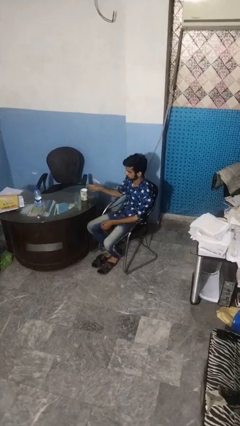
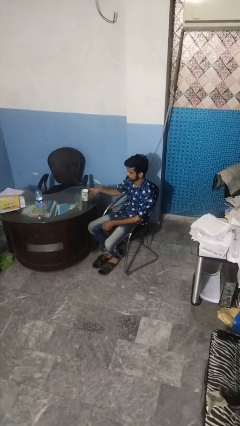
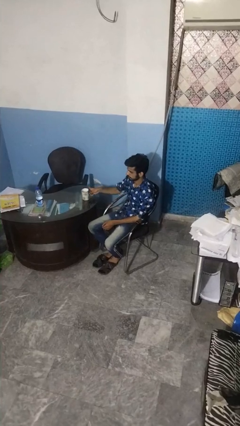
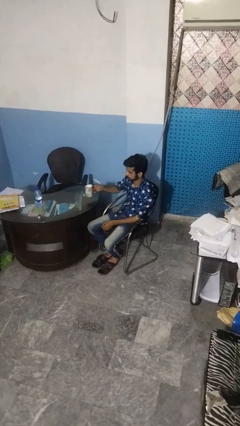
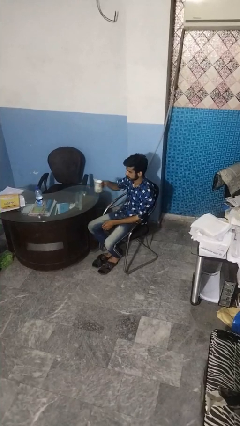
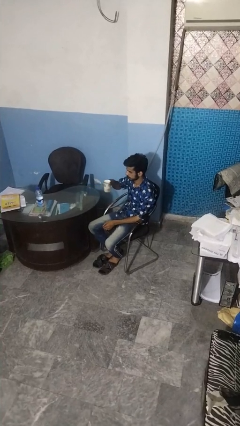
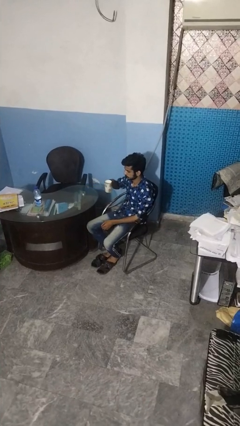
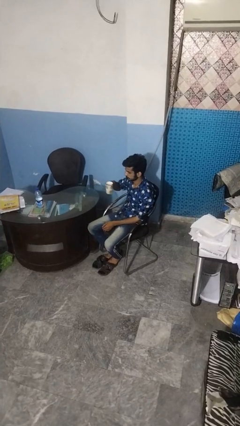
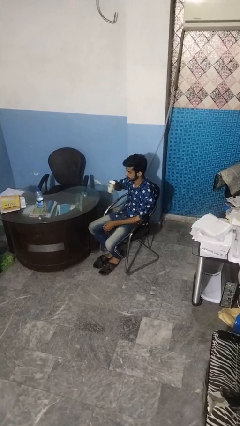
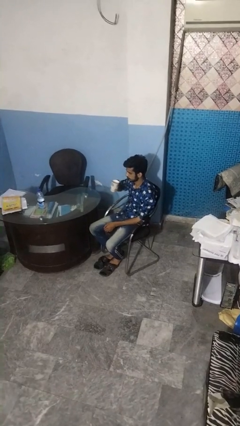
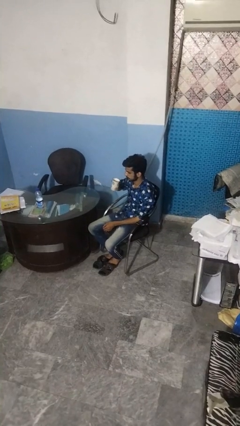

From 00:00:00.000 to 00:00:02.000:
person picks up object from table

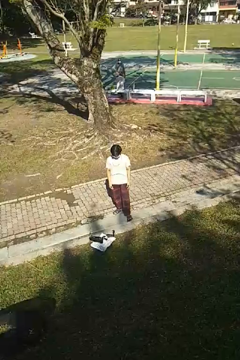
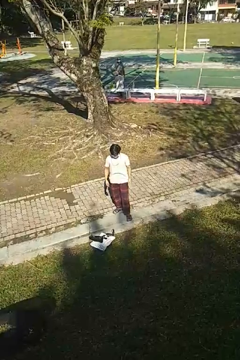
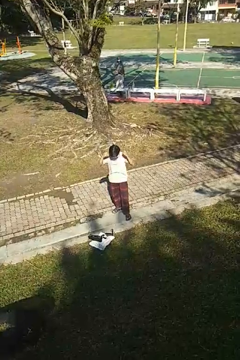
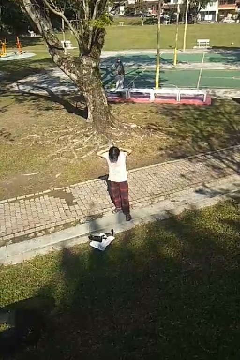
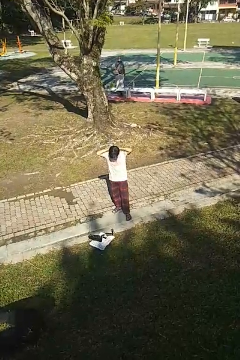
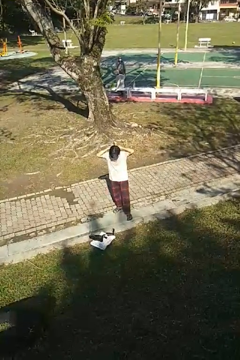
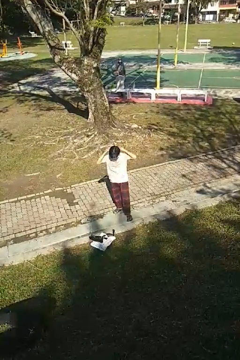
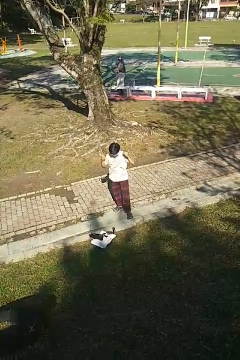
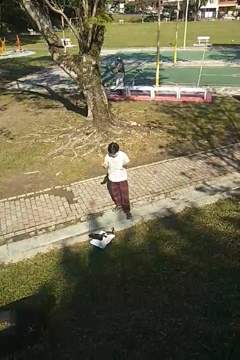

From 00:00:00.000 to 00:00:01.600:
person takes off necklace

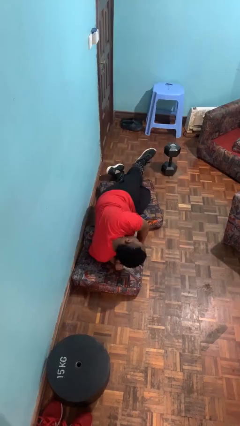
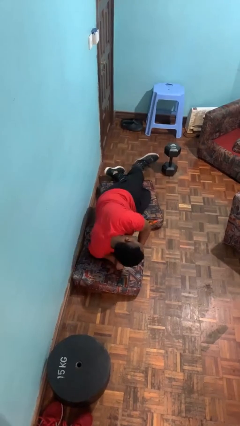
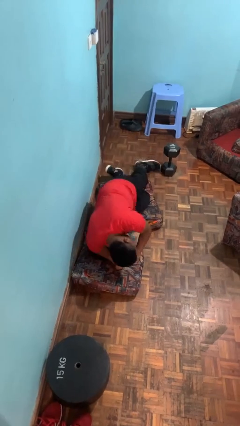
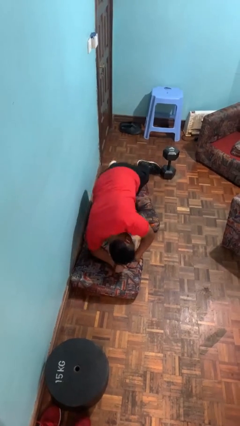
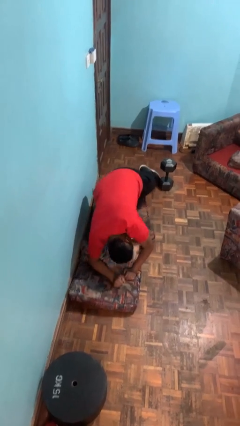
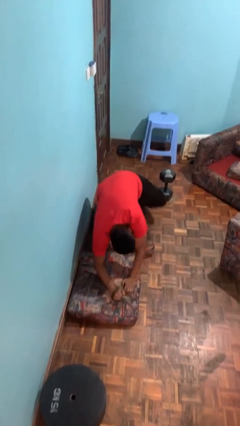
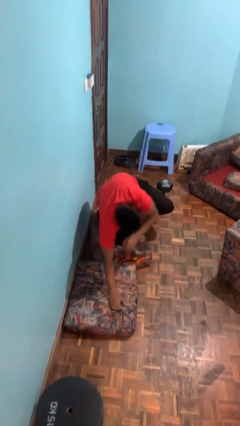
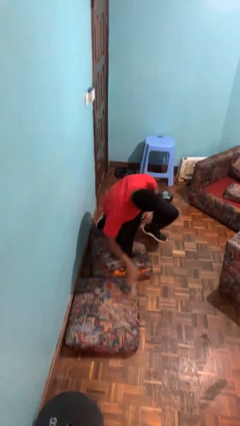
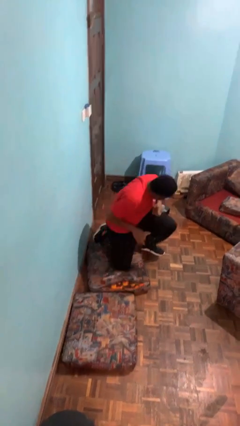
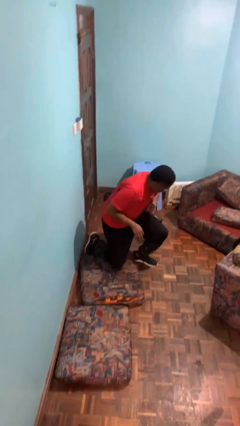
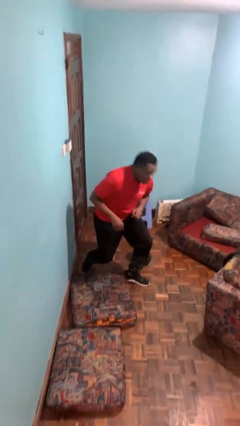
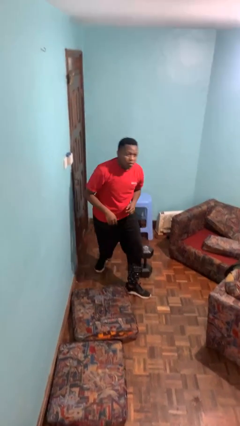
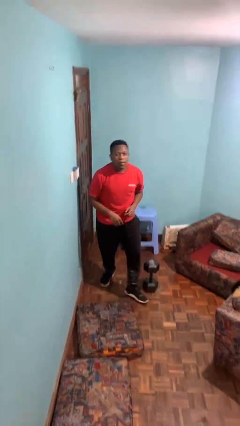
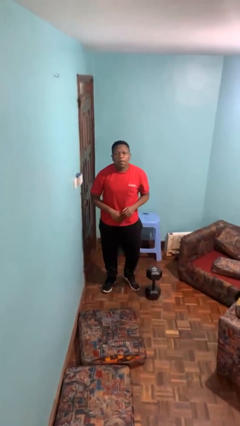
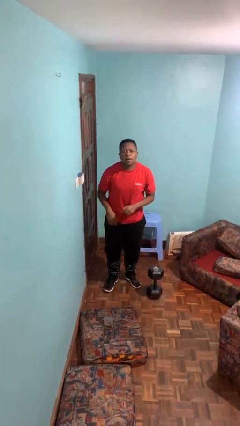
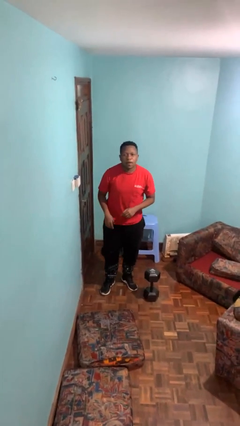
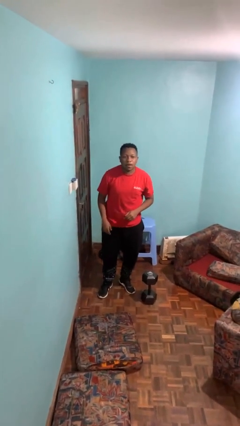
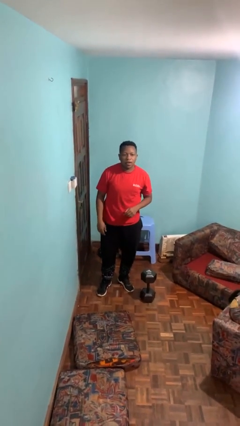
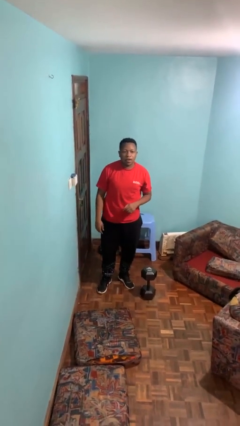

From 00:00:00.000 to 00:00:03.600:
person stands up from floor

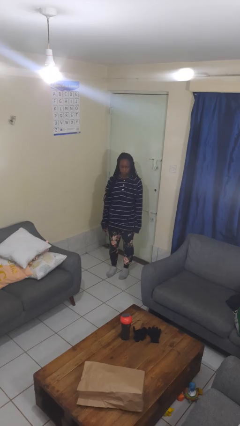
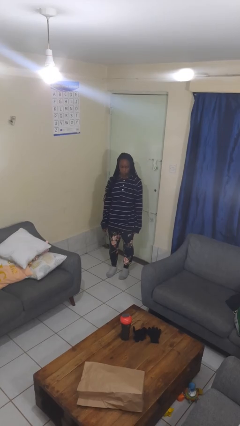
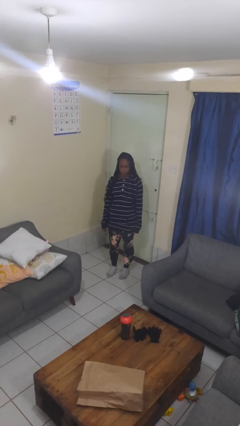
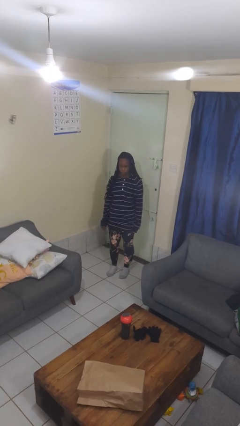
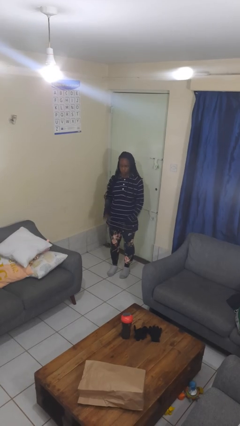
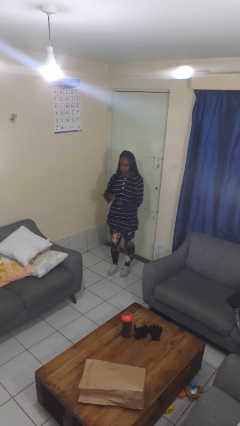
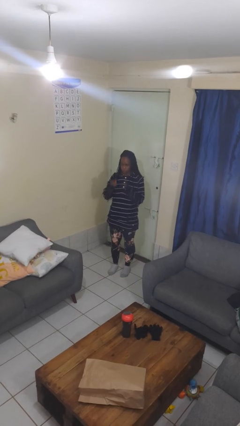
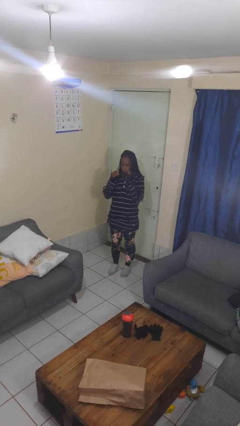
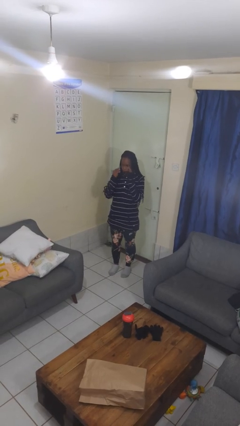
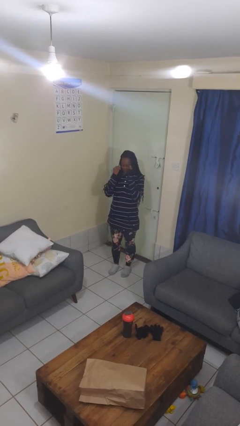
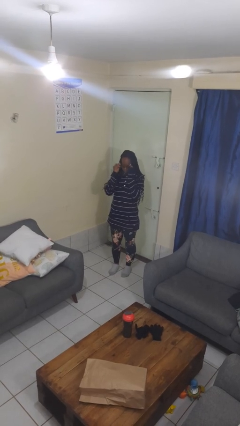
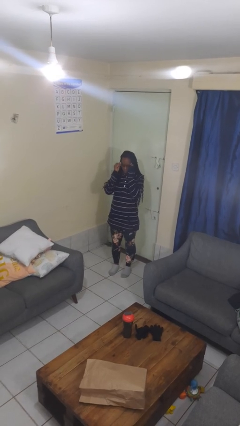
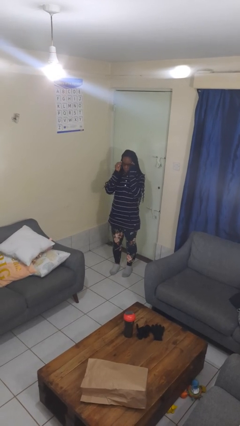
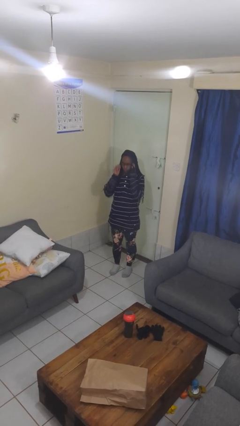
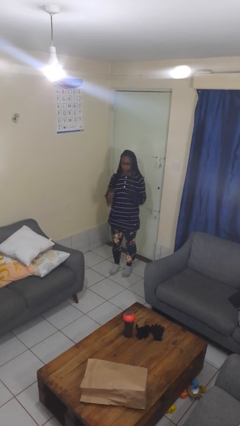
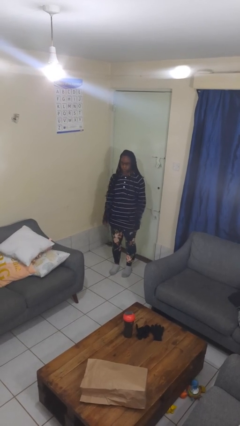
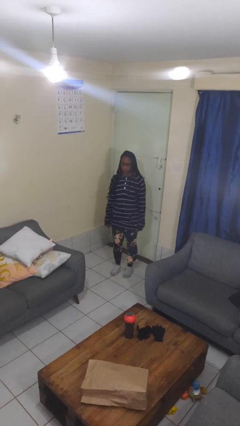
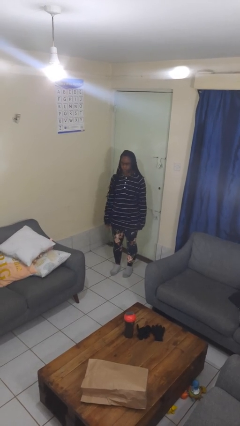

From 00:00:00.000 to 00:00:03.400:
person puts on glasses

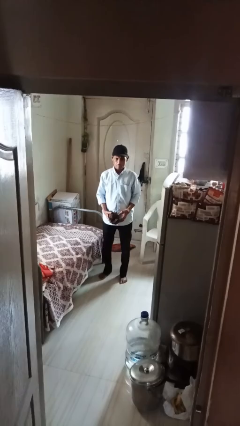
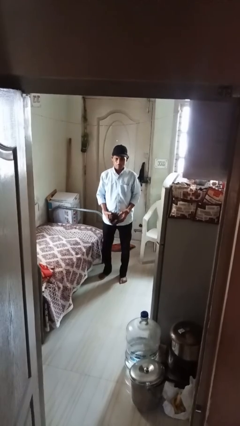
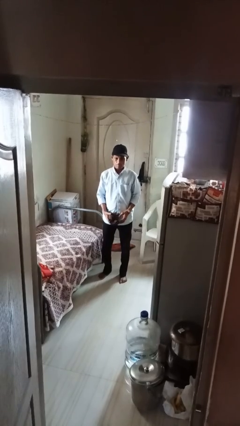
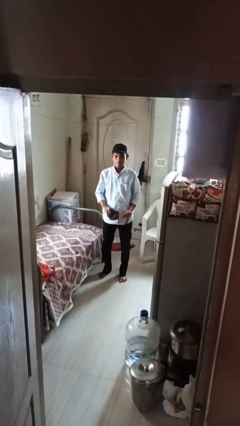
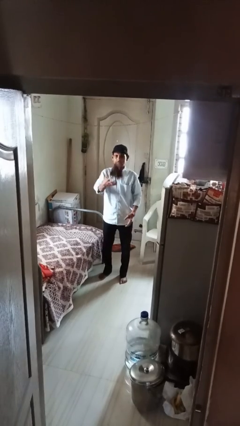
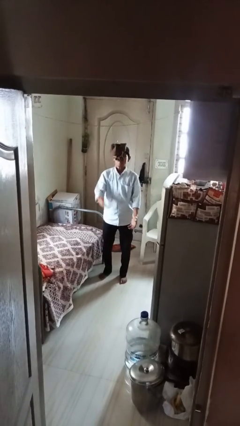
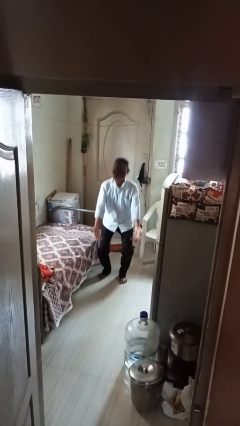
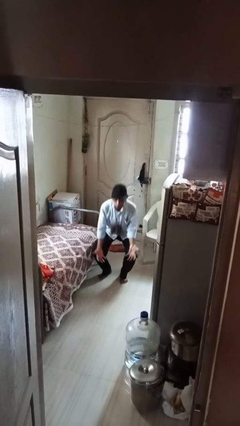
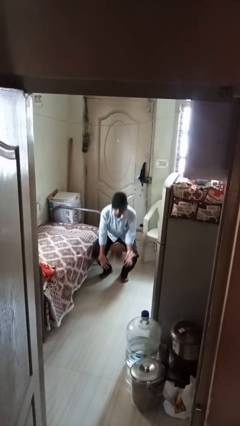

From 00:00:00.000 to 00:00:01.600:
person drops object

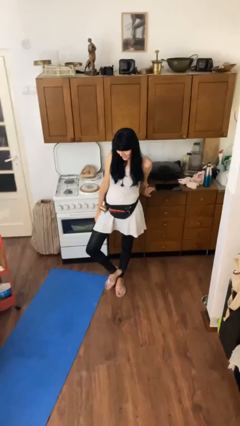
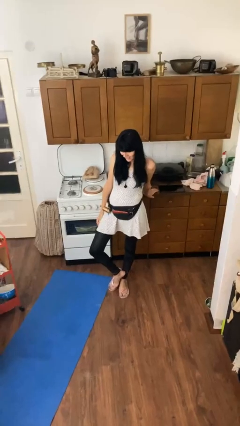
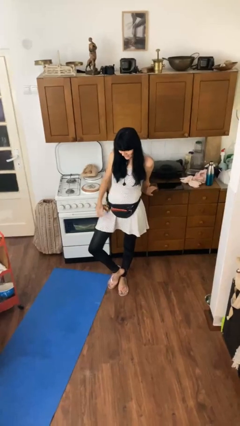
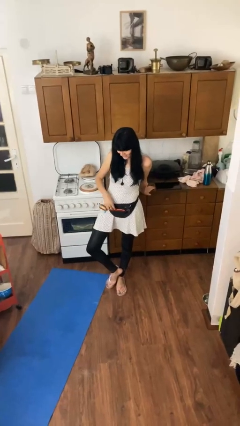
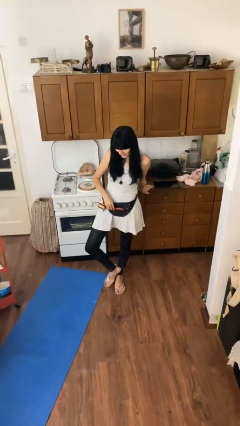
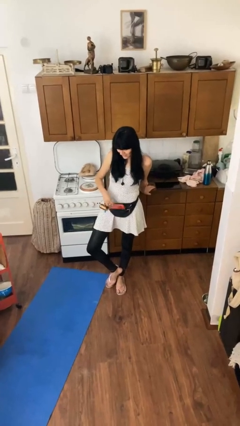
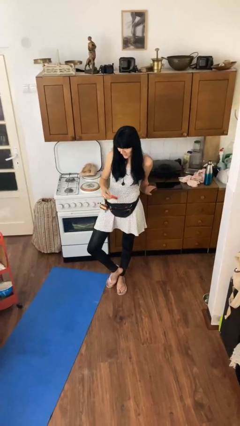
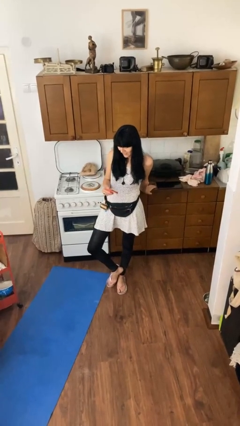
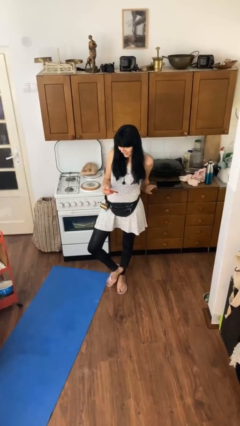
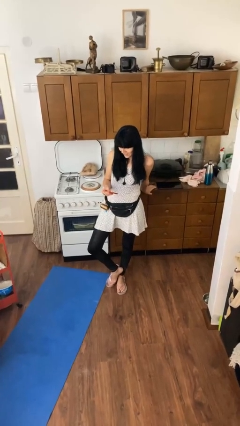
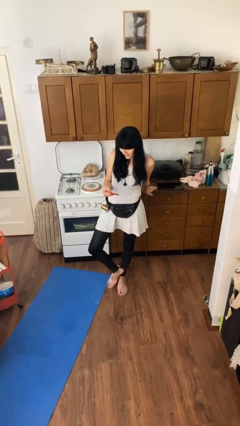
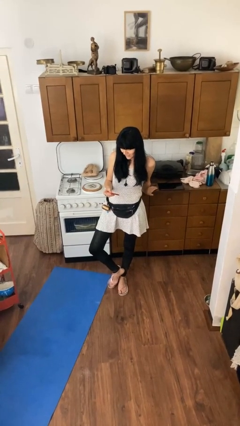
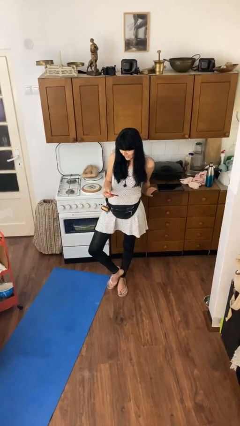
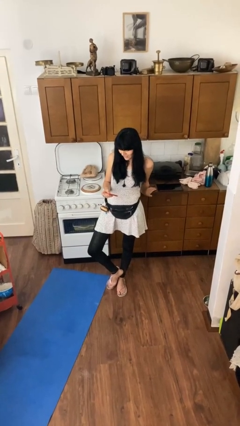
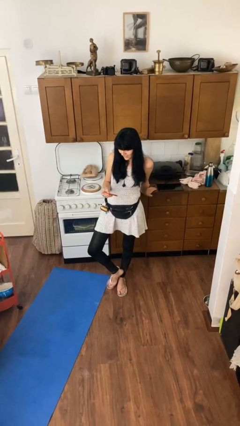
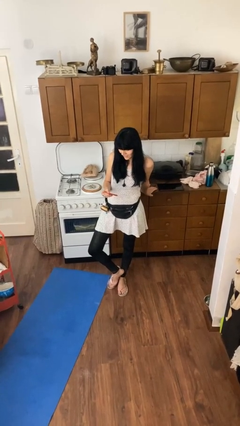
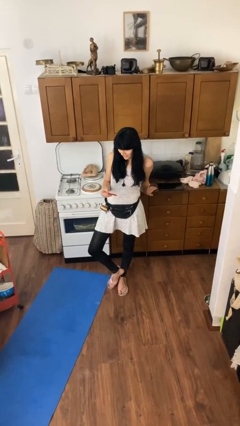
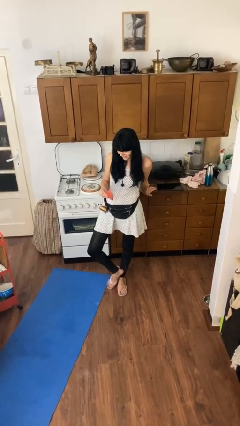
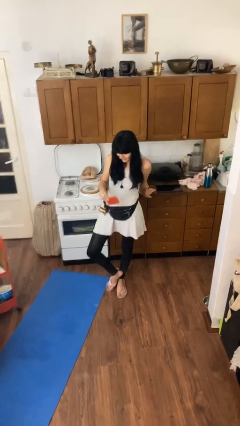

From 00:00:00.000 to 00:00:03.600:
person takes phone from pocket

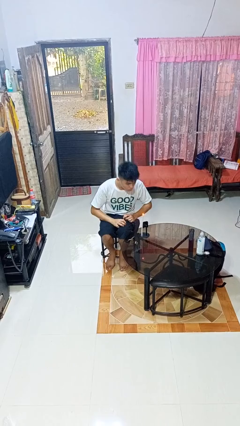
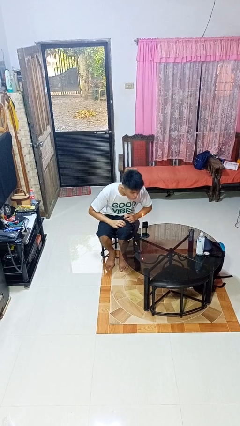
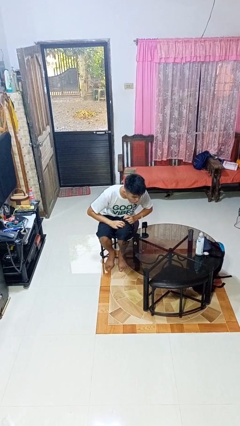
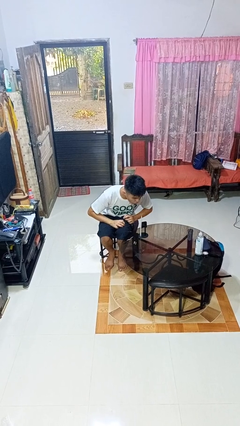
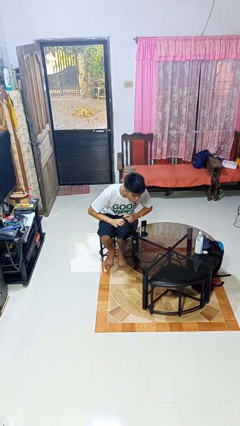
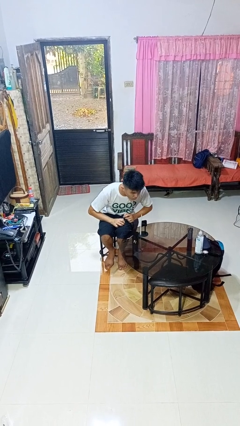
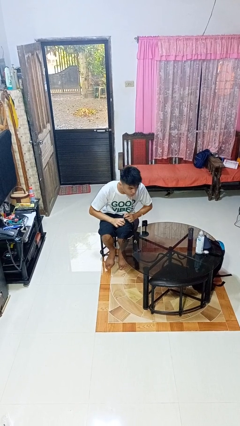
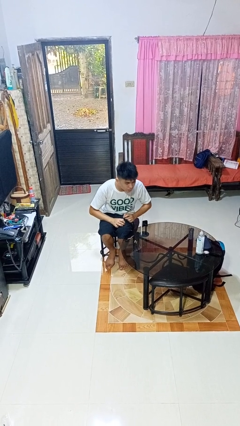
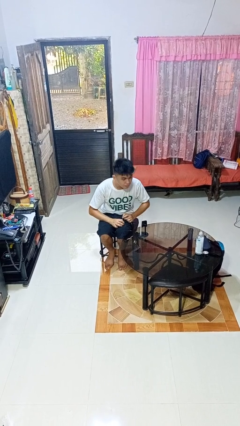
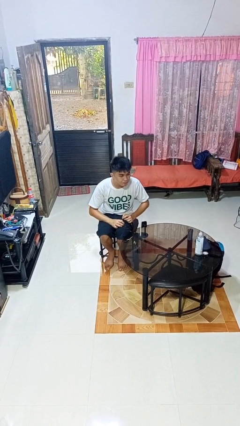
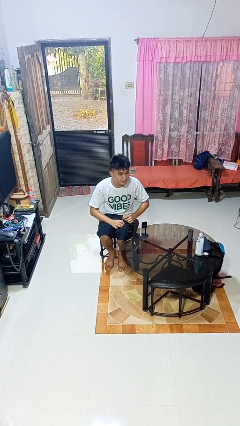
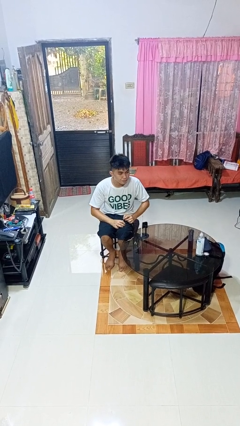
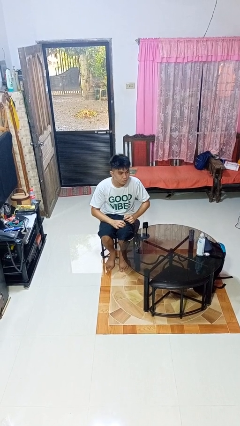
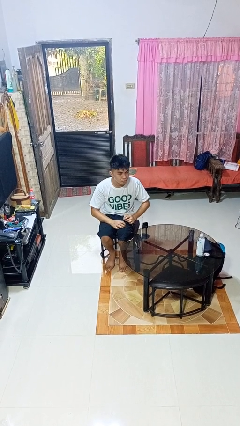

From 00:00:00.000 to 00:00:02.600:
person extinguishes candle
